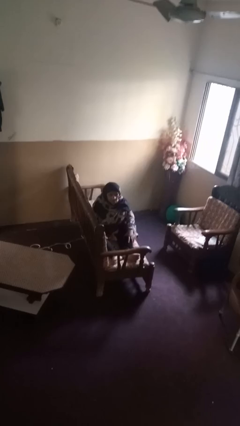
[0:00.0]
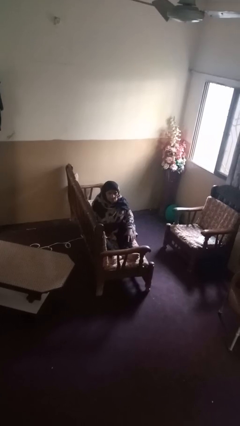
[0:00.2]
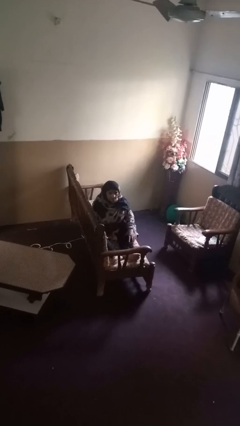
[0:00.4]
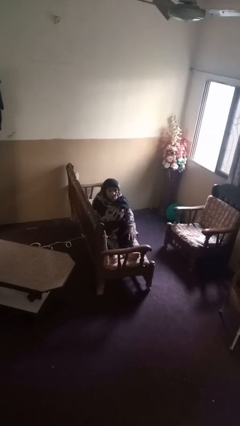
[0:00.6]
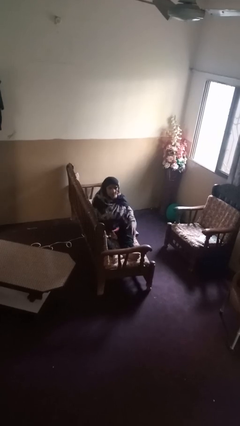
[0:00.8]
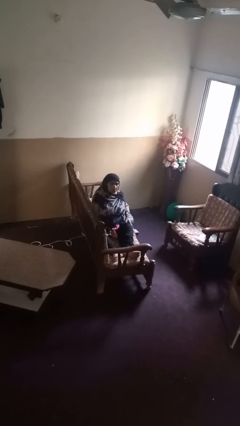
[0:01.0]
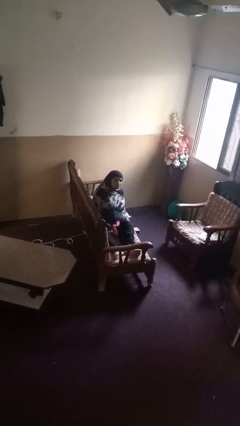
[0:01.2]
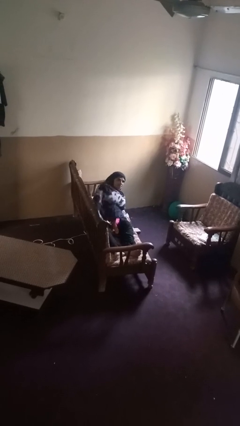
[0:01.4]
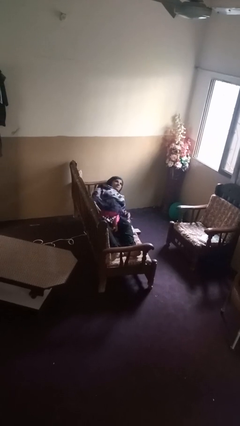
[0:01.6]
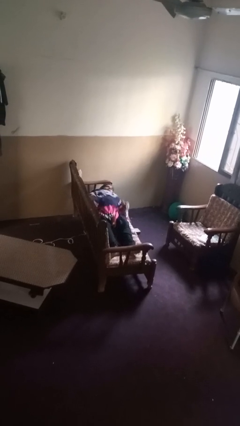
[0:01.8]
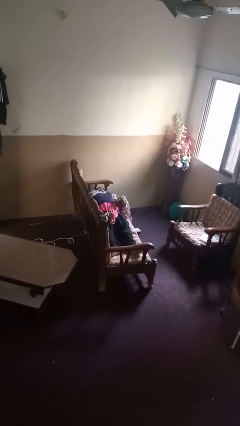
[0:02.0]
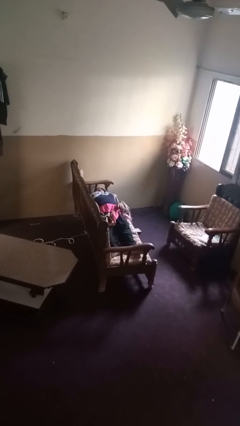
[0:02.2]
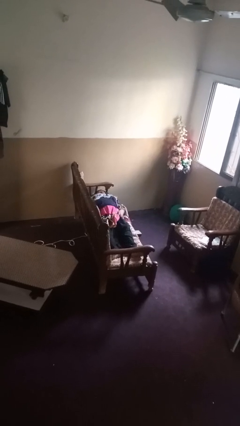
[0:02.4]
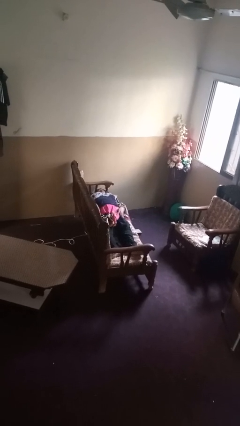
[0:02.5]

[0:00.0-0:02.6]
person lies down on couch

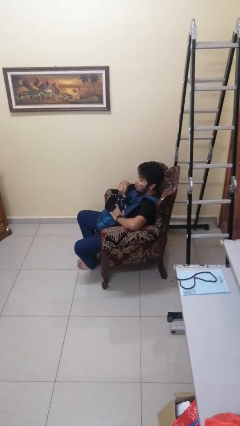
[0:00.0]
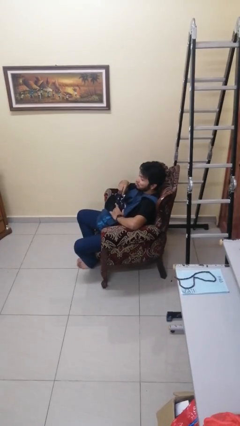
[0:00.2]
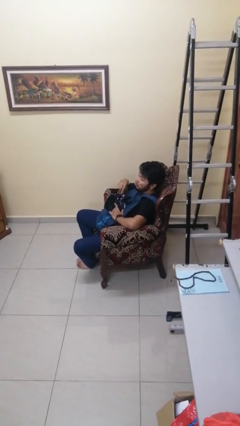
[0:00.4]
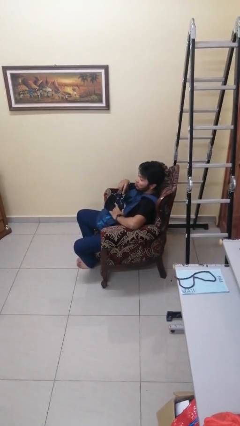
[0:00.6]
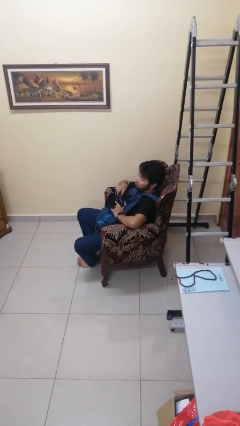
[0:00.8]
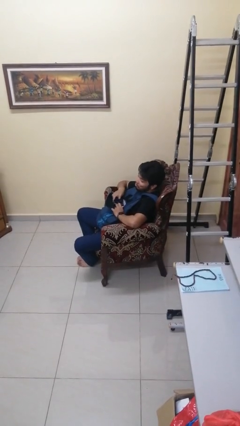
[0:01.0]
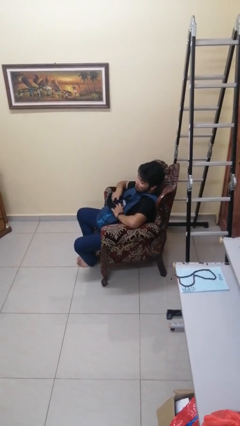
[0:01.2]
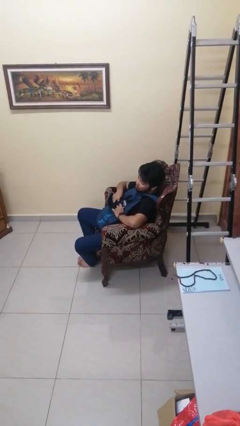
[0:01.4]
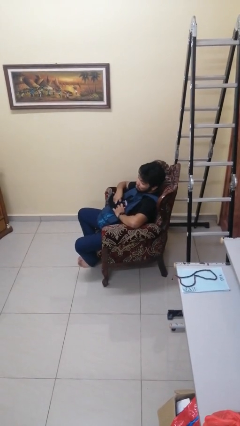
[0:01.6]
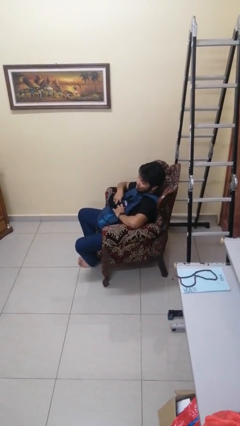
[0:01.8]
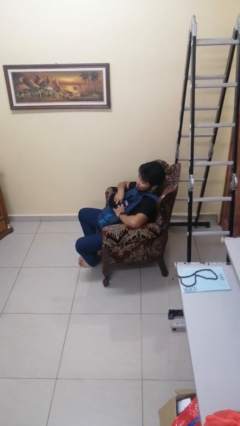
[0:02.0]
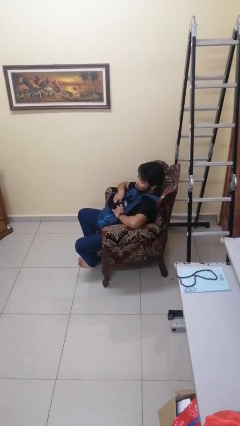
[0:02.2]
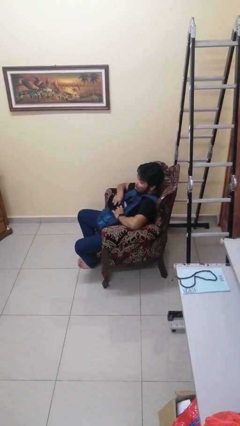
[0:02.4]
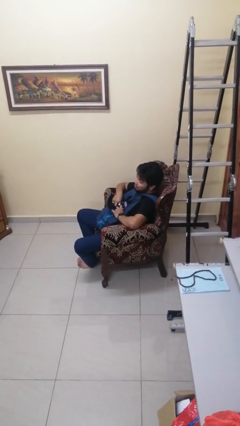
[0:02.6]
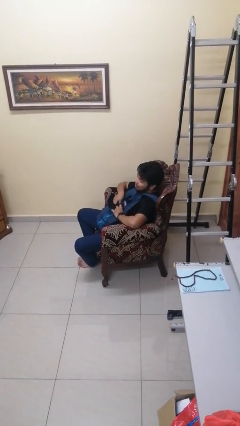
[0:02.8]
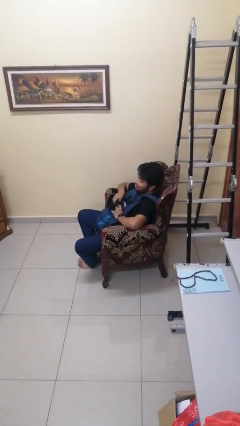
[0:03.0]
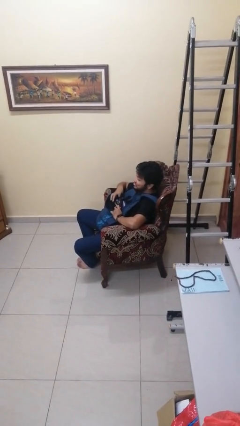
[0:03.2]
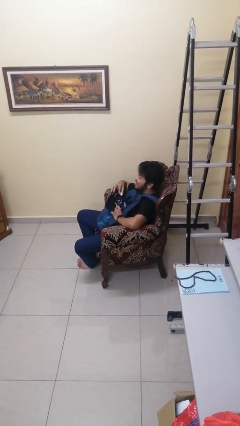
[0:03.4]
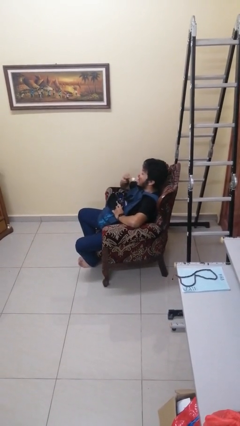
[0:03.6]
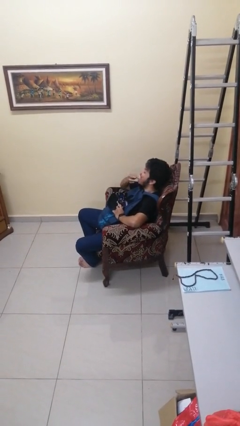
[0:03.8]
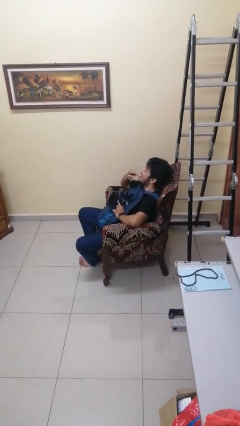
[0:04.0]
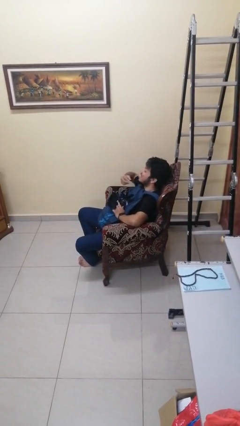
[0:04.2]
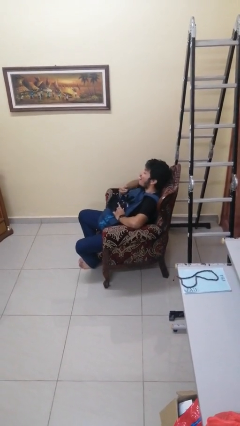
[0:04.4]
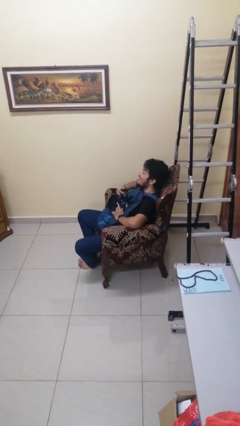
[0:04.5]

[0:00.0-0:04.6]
person eats snack from bag

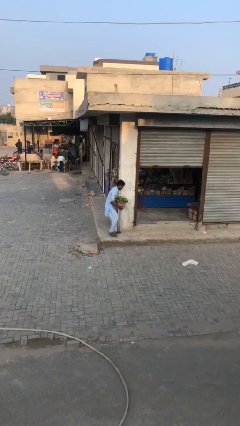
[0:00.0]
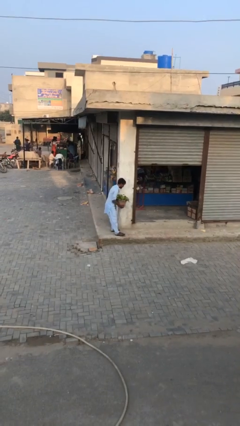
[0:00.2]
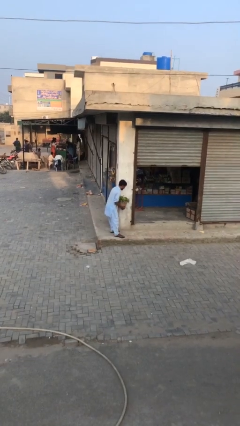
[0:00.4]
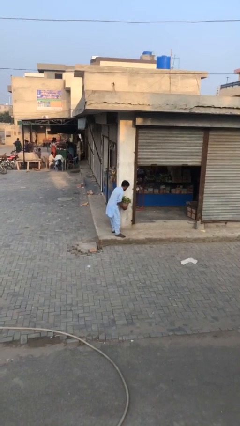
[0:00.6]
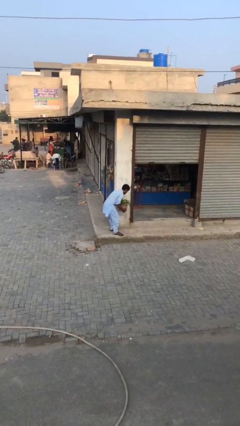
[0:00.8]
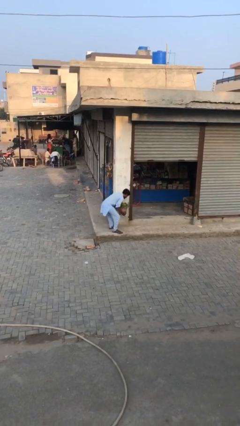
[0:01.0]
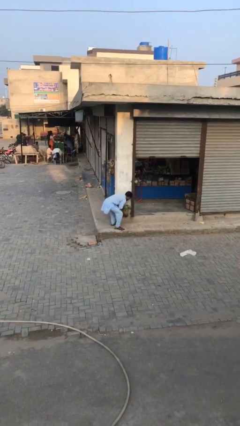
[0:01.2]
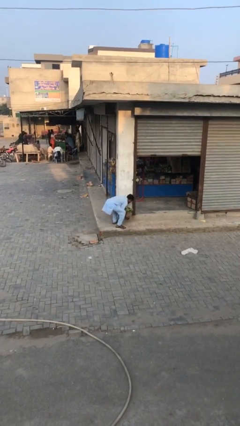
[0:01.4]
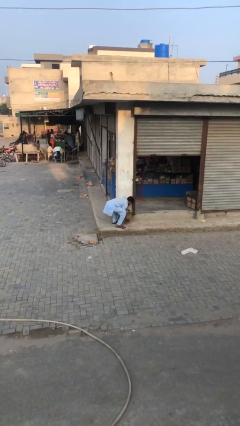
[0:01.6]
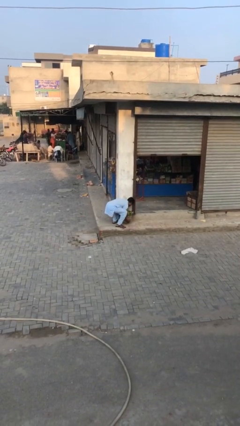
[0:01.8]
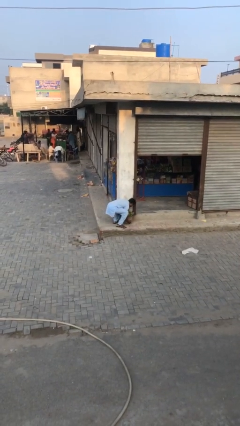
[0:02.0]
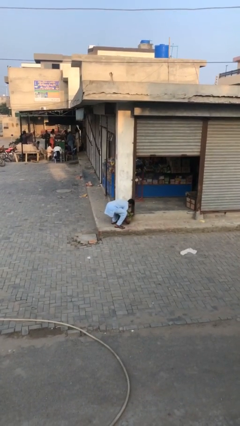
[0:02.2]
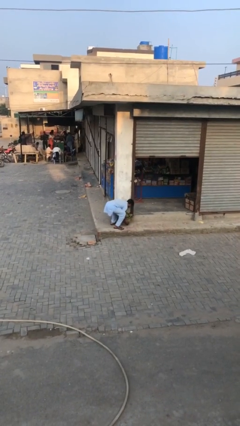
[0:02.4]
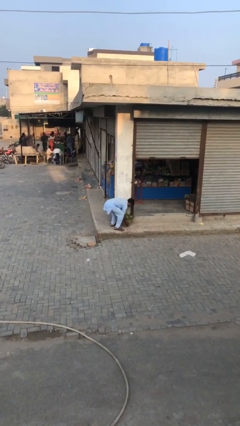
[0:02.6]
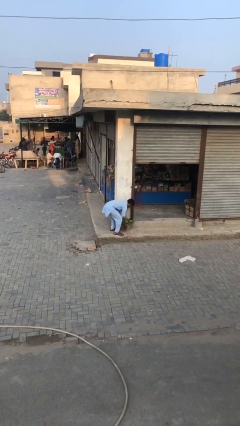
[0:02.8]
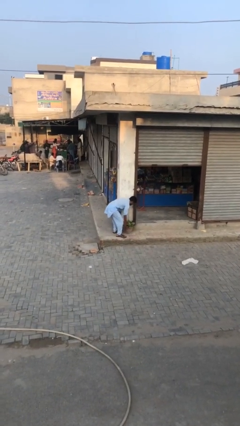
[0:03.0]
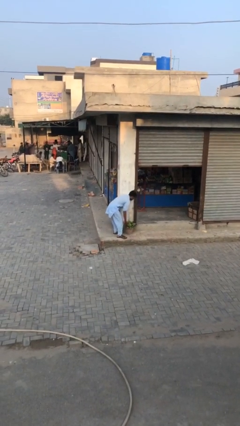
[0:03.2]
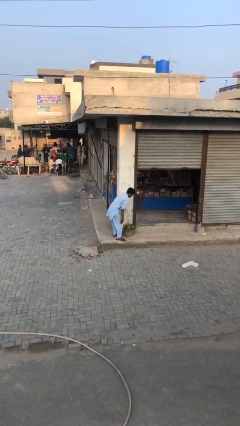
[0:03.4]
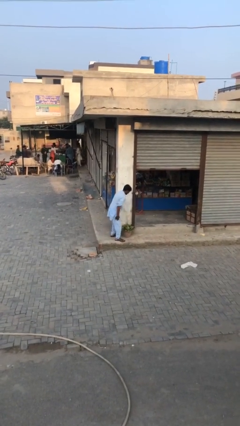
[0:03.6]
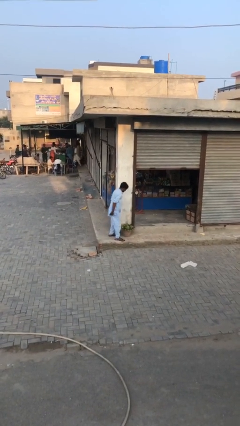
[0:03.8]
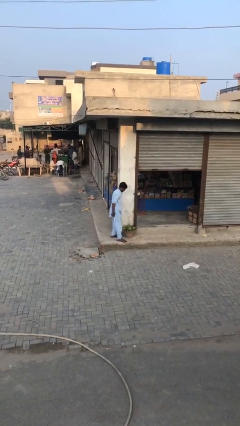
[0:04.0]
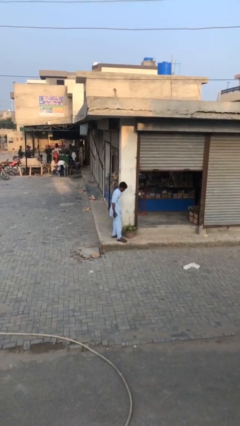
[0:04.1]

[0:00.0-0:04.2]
person puts down object on floor

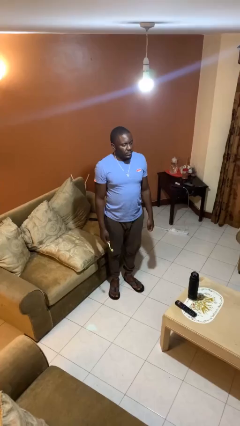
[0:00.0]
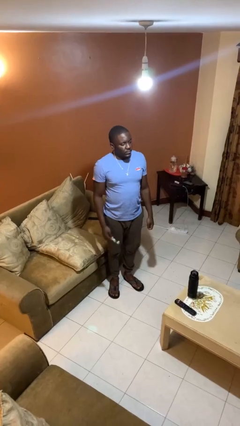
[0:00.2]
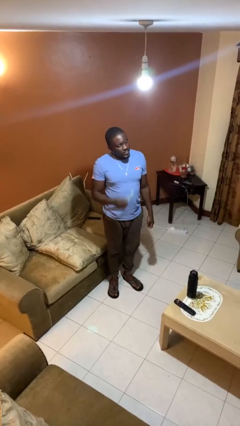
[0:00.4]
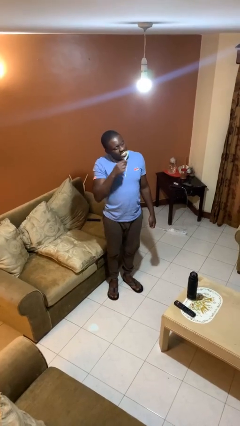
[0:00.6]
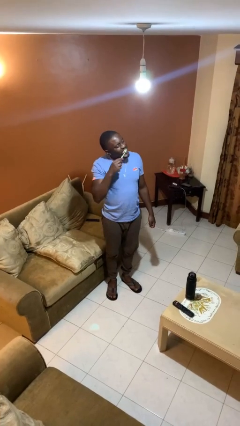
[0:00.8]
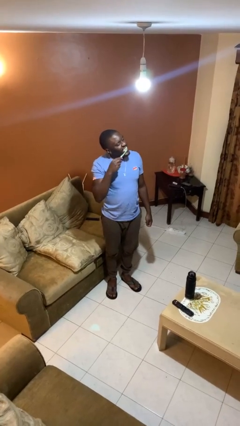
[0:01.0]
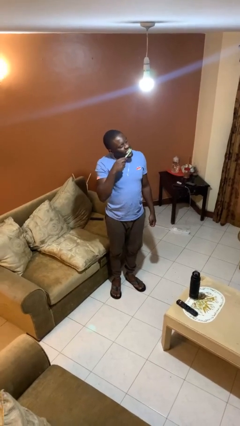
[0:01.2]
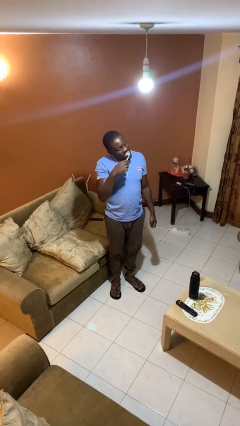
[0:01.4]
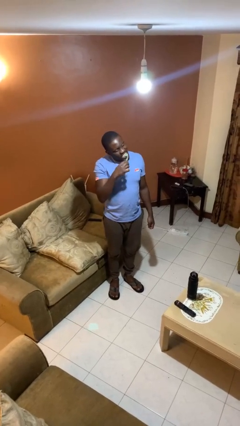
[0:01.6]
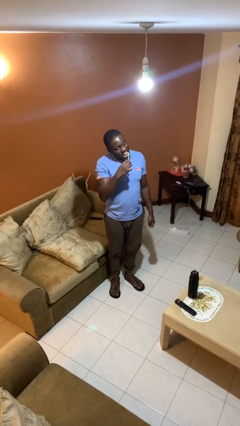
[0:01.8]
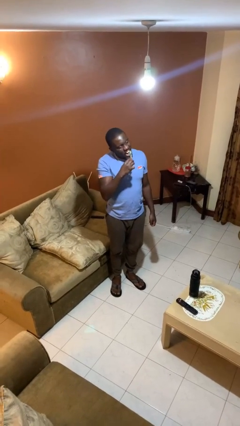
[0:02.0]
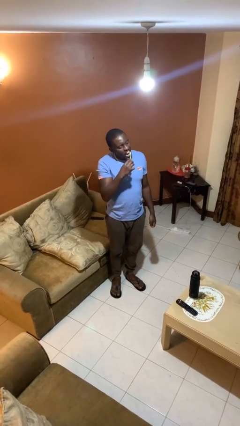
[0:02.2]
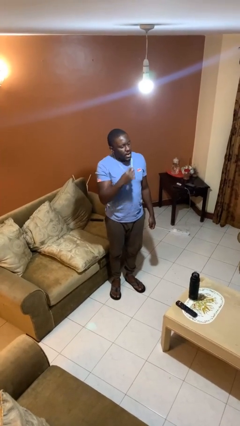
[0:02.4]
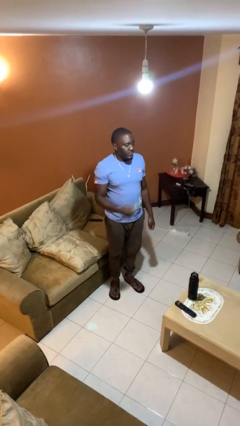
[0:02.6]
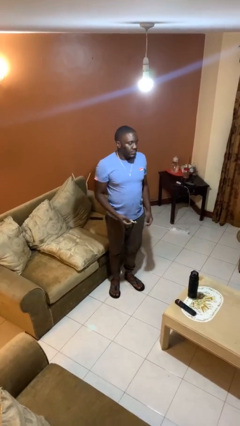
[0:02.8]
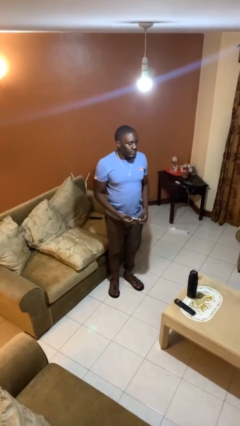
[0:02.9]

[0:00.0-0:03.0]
person brushes teeth

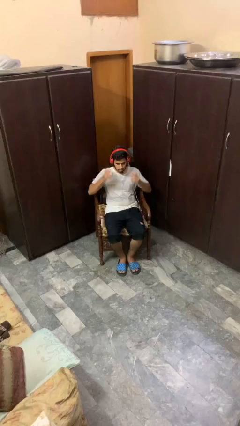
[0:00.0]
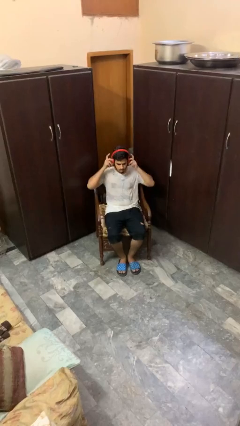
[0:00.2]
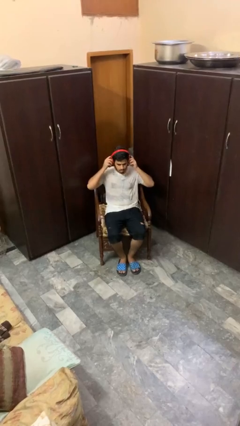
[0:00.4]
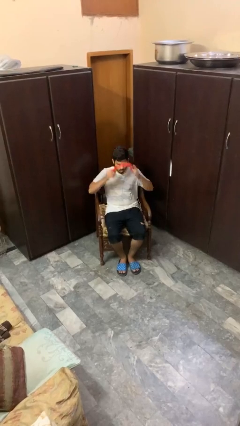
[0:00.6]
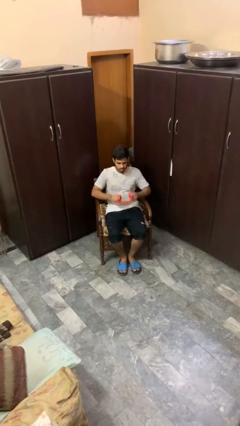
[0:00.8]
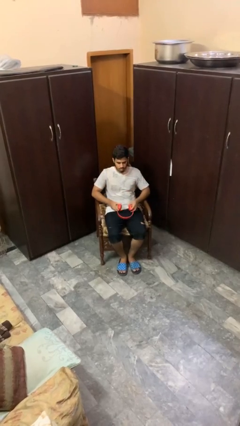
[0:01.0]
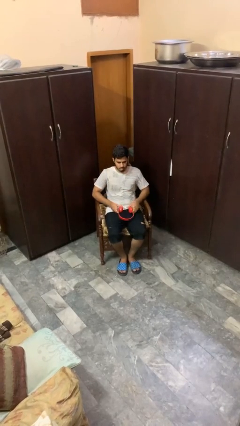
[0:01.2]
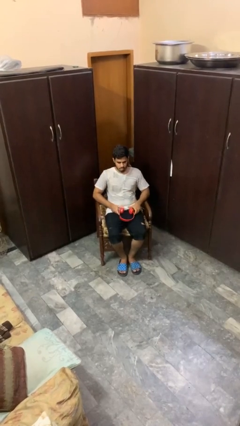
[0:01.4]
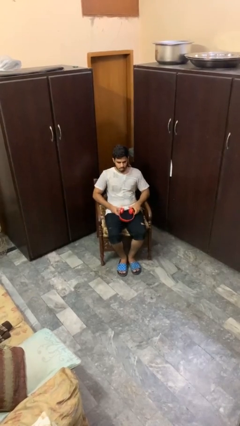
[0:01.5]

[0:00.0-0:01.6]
person takes off headphones

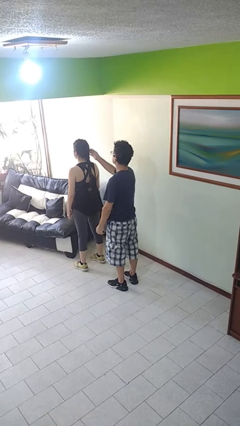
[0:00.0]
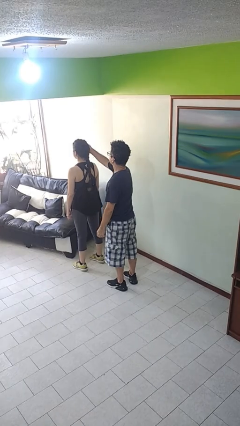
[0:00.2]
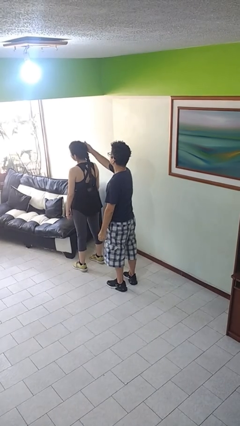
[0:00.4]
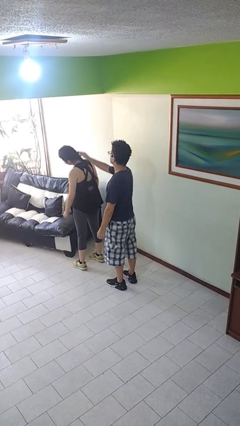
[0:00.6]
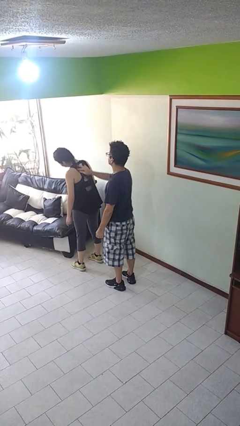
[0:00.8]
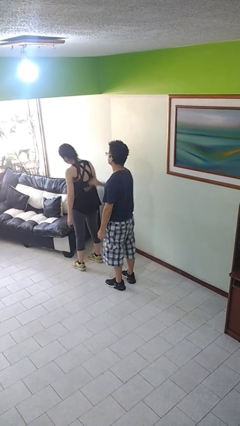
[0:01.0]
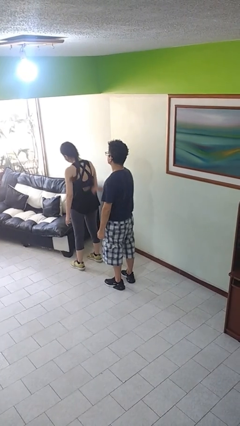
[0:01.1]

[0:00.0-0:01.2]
person grabs person by hair

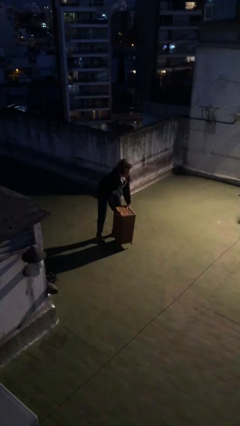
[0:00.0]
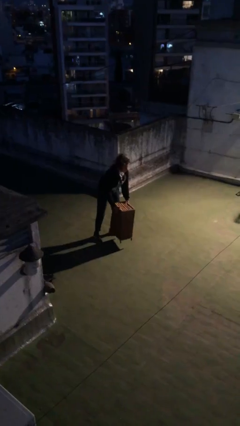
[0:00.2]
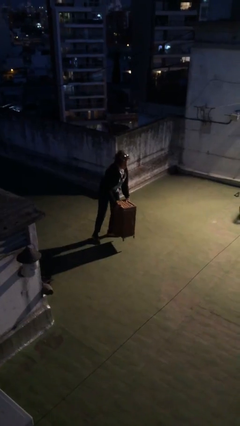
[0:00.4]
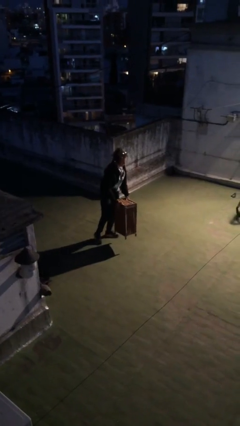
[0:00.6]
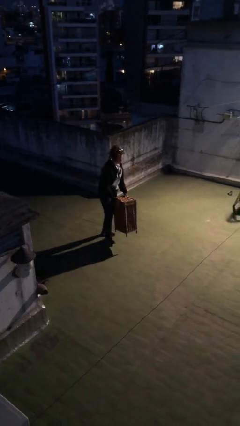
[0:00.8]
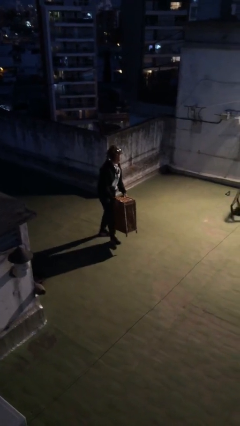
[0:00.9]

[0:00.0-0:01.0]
person picks up object from floor
